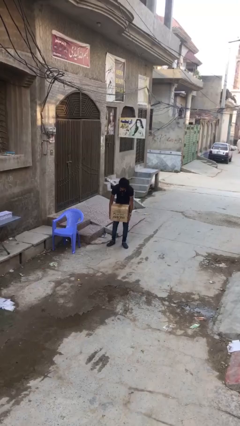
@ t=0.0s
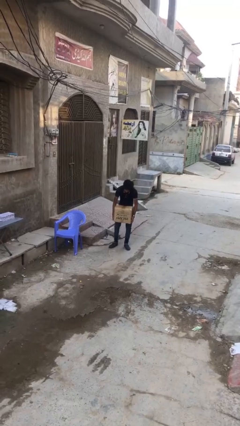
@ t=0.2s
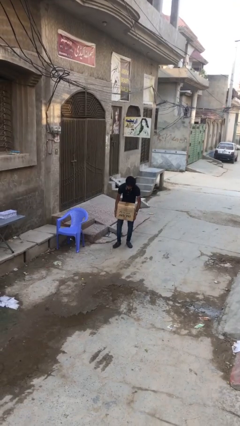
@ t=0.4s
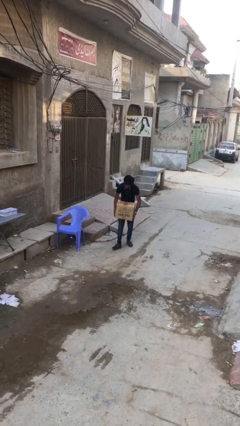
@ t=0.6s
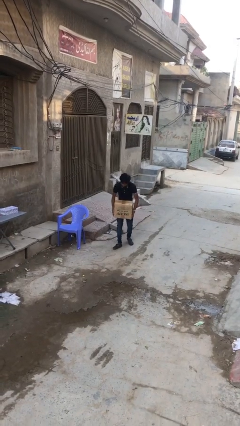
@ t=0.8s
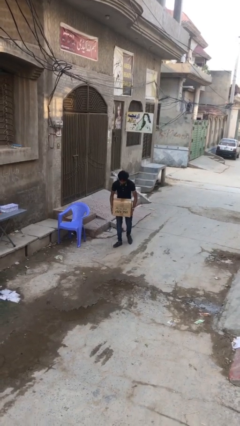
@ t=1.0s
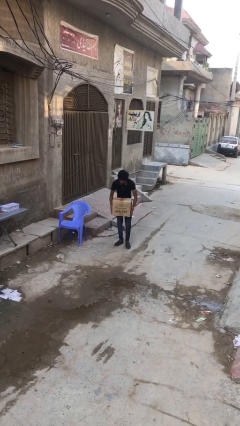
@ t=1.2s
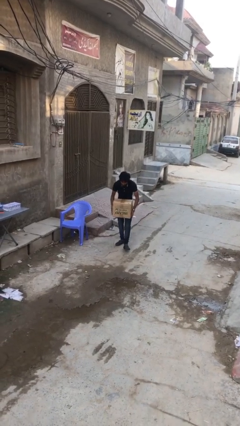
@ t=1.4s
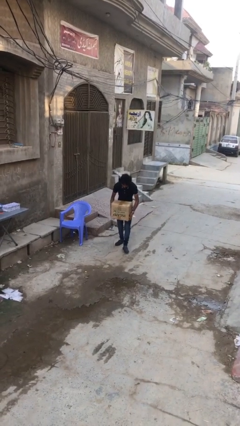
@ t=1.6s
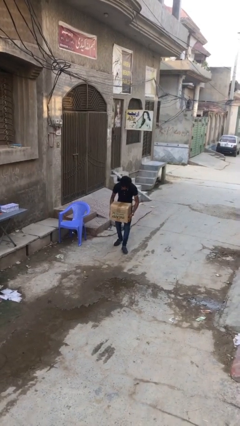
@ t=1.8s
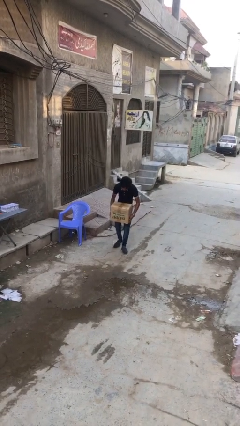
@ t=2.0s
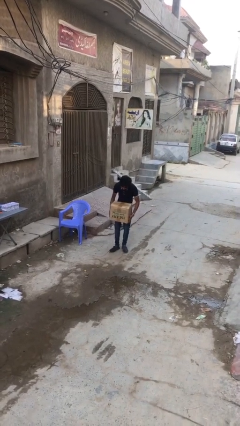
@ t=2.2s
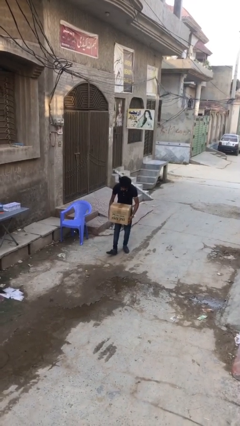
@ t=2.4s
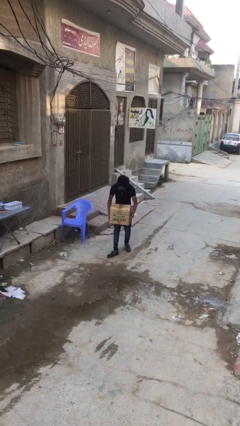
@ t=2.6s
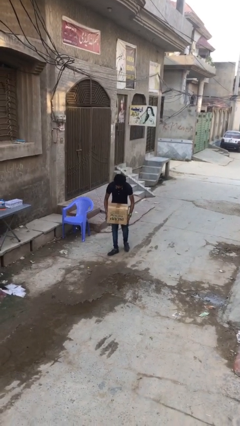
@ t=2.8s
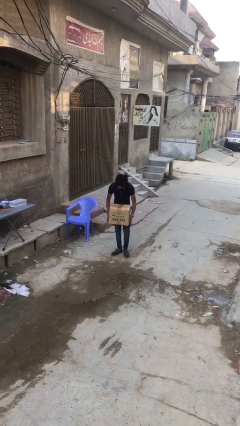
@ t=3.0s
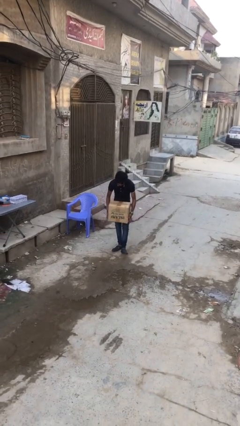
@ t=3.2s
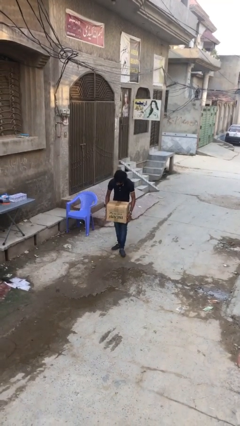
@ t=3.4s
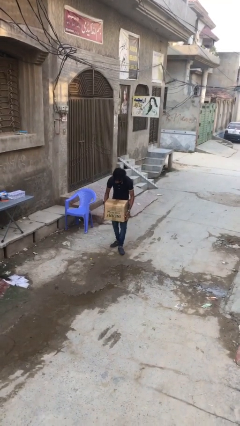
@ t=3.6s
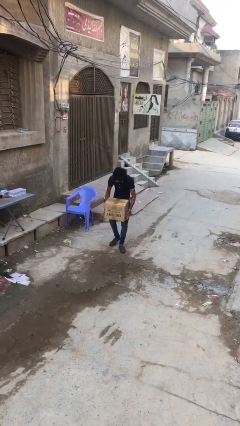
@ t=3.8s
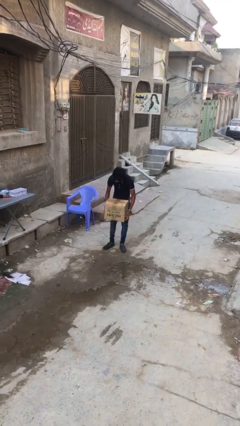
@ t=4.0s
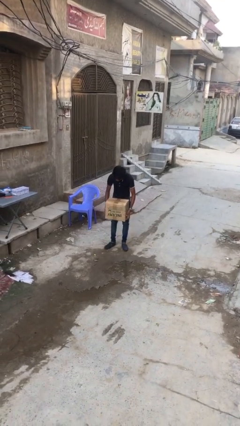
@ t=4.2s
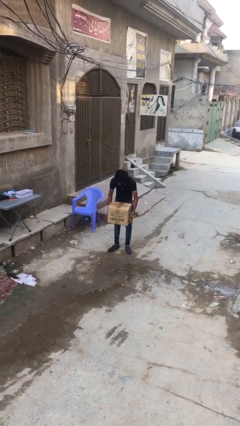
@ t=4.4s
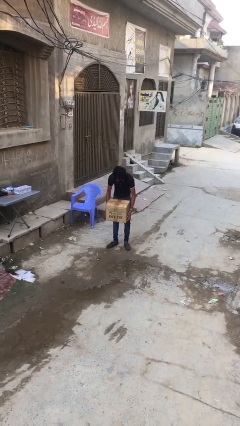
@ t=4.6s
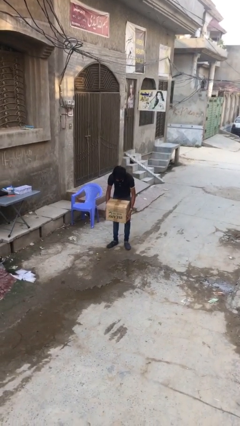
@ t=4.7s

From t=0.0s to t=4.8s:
person carries heavy object

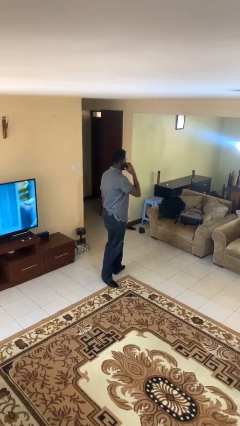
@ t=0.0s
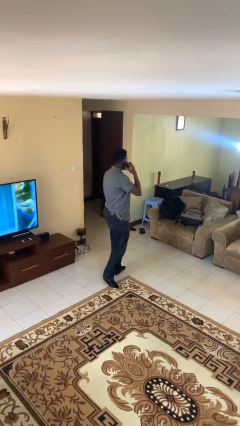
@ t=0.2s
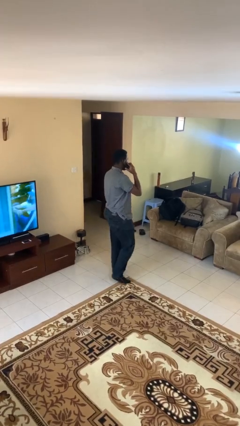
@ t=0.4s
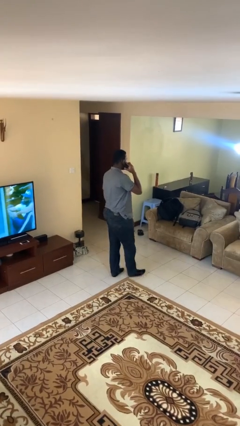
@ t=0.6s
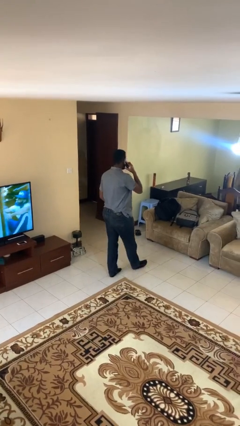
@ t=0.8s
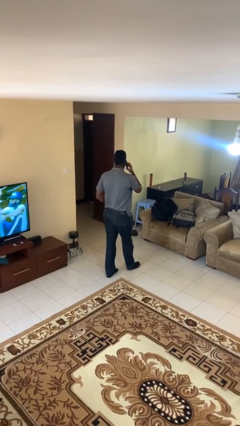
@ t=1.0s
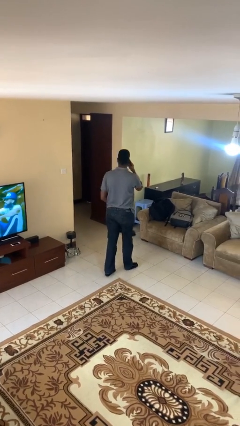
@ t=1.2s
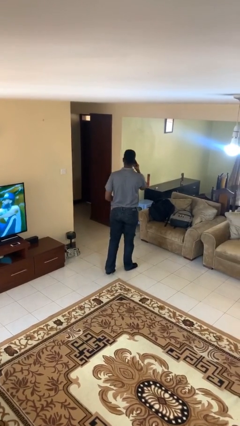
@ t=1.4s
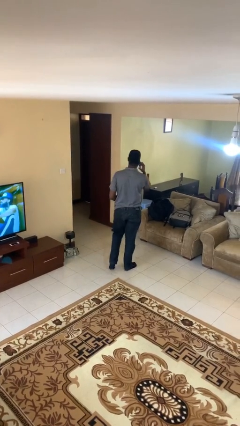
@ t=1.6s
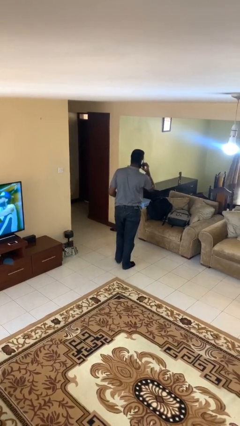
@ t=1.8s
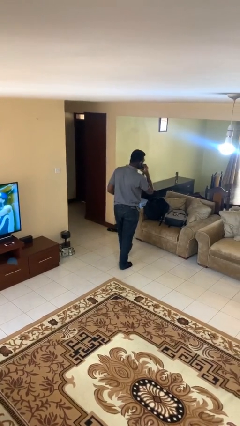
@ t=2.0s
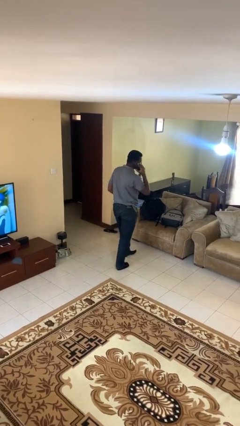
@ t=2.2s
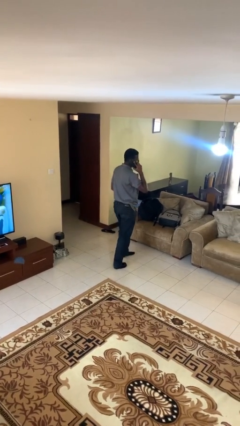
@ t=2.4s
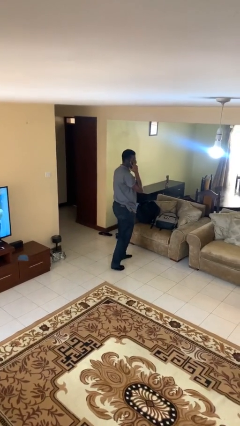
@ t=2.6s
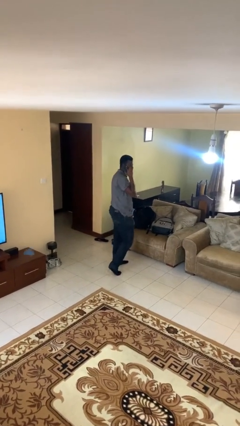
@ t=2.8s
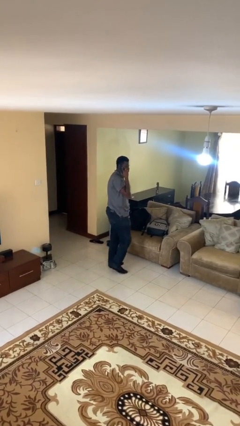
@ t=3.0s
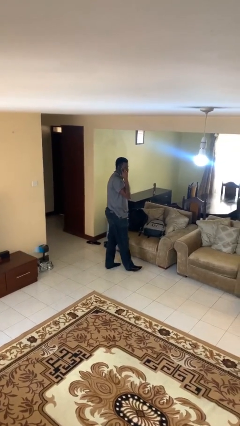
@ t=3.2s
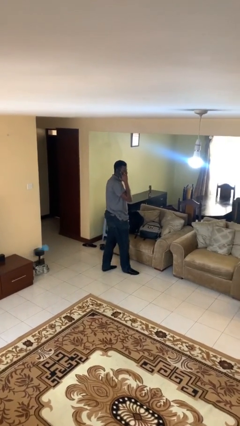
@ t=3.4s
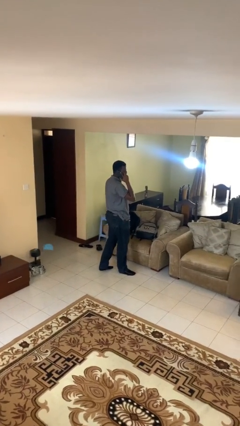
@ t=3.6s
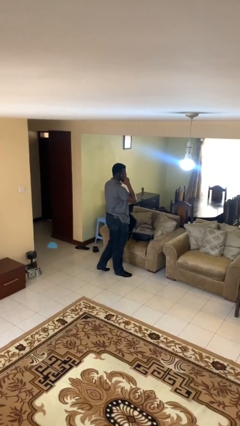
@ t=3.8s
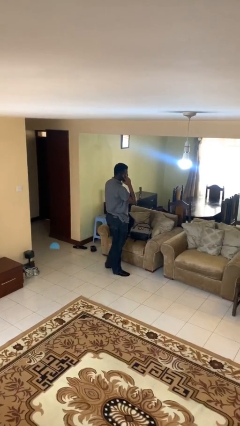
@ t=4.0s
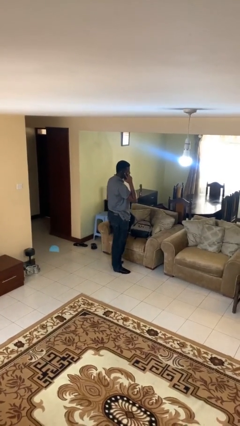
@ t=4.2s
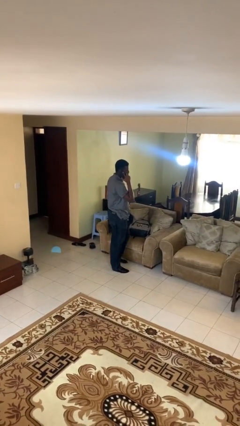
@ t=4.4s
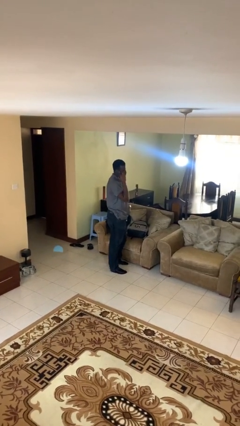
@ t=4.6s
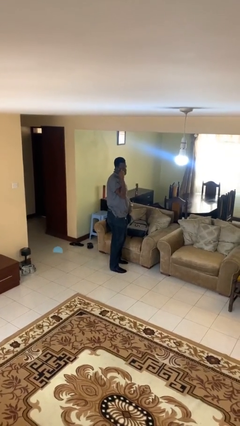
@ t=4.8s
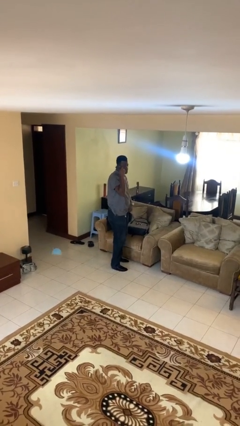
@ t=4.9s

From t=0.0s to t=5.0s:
person talks on phone

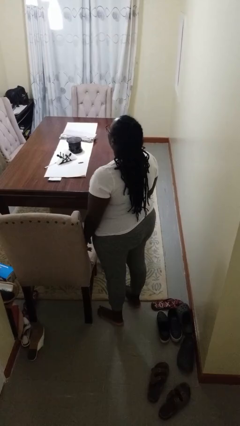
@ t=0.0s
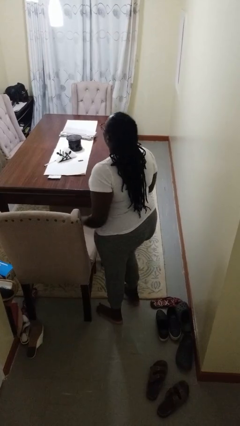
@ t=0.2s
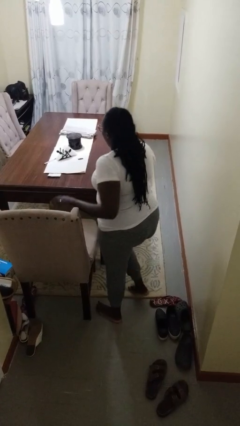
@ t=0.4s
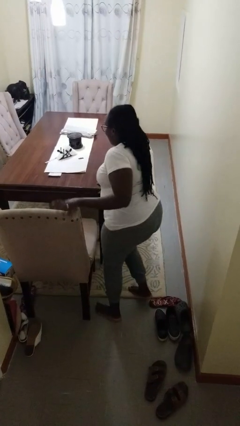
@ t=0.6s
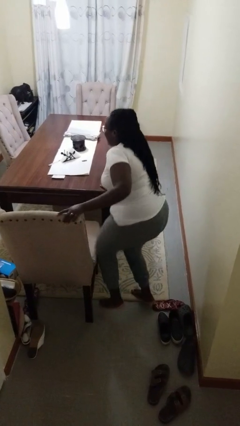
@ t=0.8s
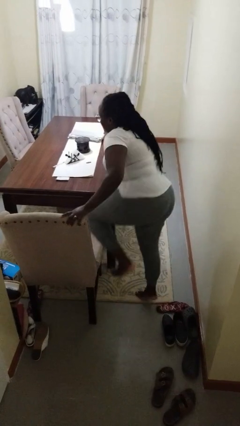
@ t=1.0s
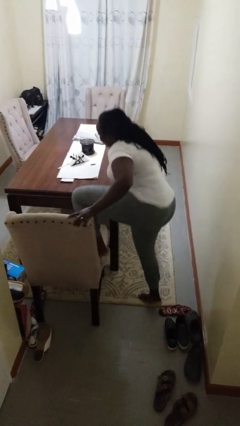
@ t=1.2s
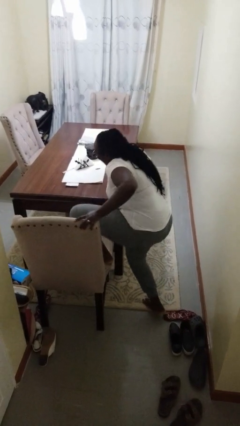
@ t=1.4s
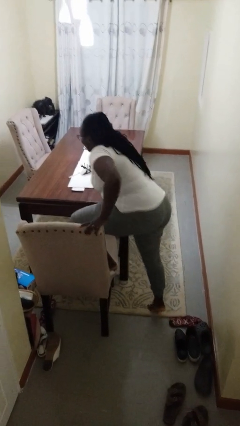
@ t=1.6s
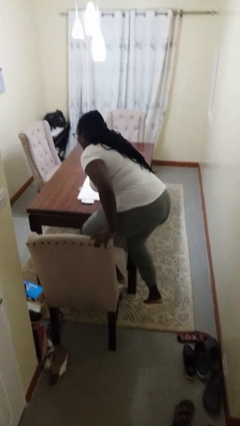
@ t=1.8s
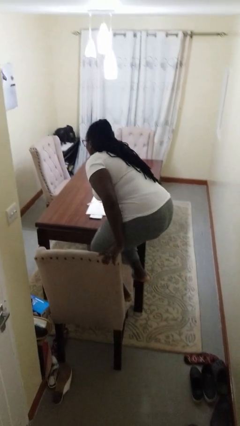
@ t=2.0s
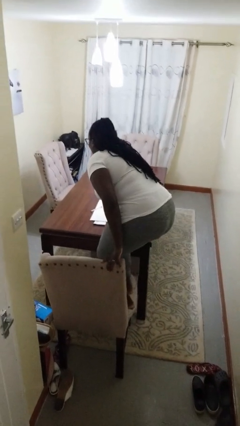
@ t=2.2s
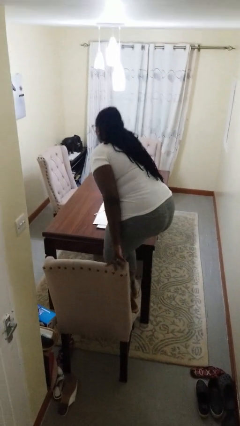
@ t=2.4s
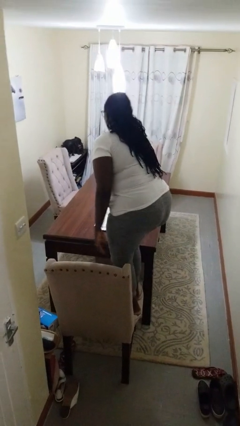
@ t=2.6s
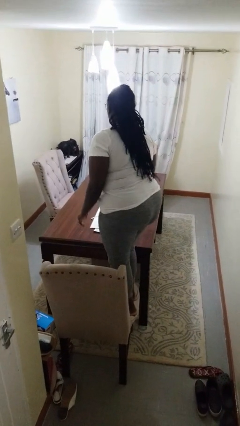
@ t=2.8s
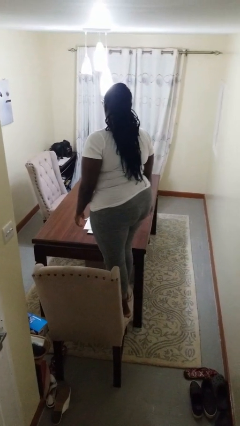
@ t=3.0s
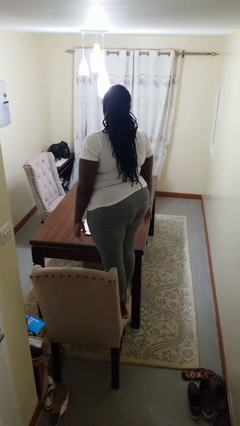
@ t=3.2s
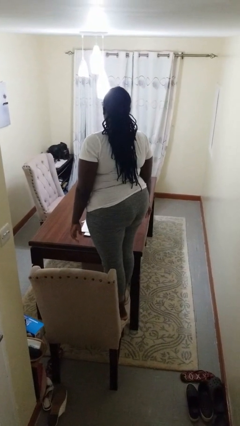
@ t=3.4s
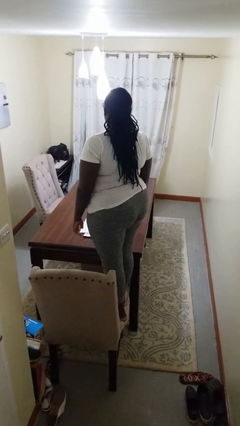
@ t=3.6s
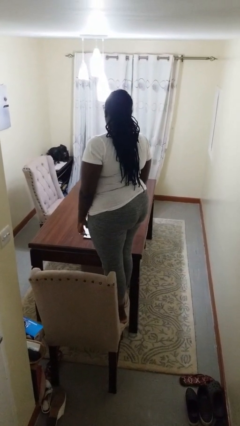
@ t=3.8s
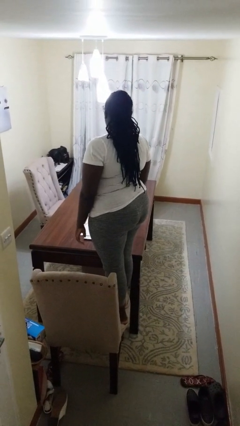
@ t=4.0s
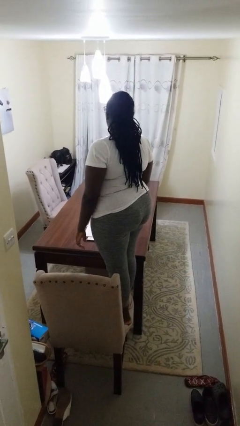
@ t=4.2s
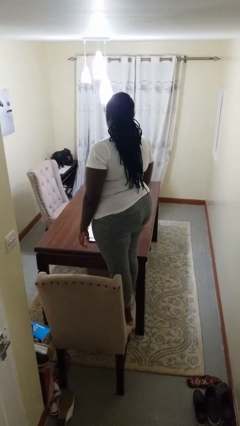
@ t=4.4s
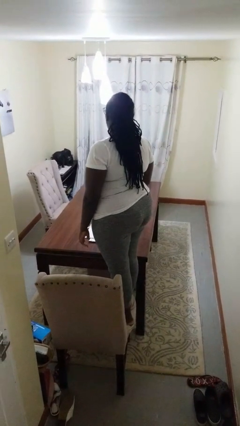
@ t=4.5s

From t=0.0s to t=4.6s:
person climbs on chair

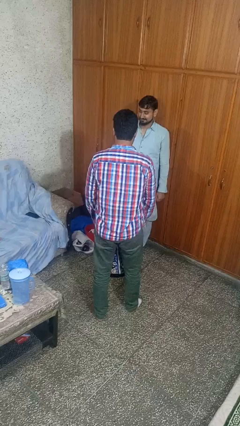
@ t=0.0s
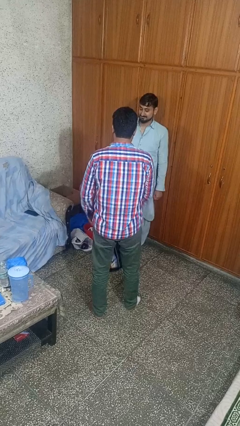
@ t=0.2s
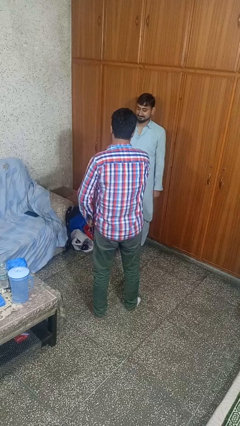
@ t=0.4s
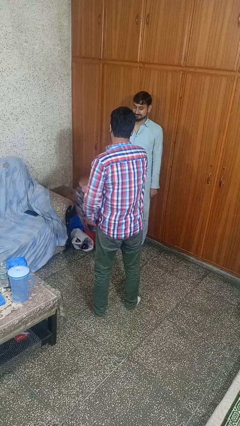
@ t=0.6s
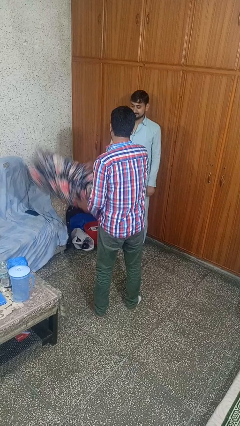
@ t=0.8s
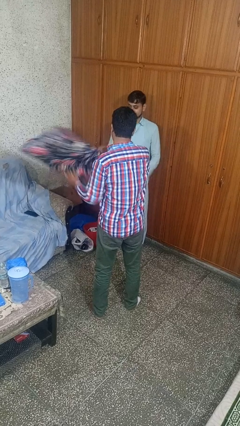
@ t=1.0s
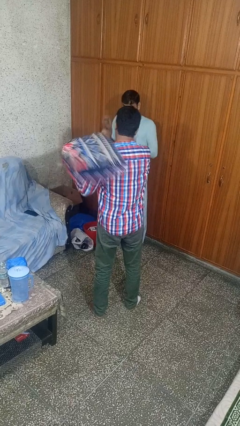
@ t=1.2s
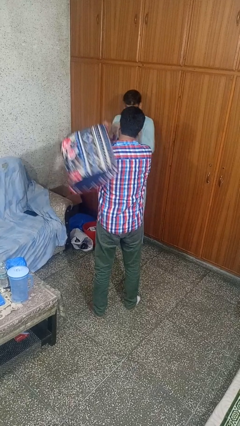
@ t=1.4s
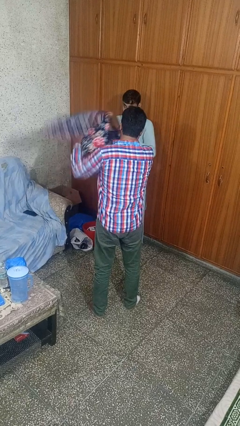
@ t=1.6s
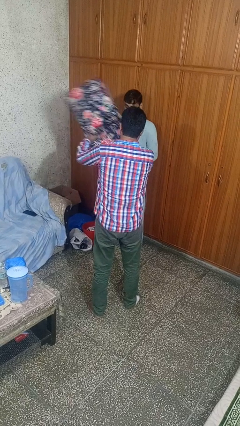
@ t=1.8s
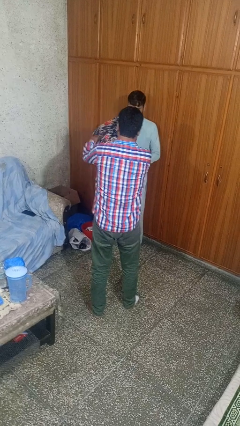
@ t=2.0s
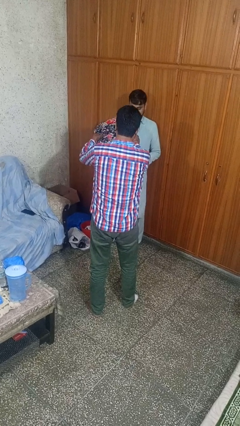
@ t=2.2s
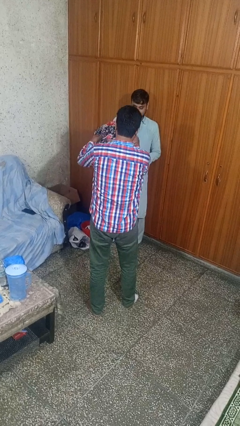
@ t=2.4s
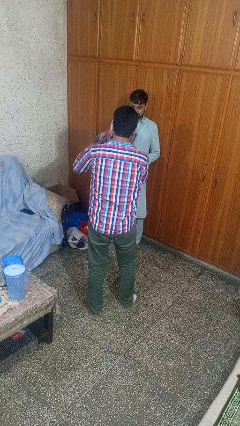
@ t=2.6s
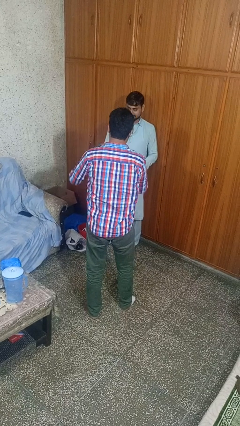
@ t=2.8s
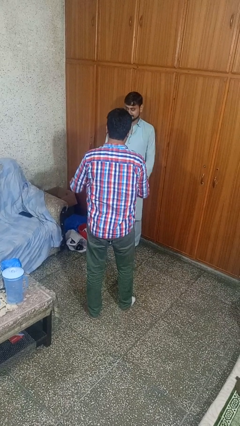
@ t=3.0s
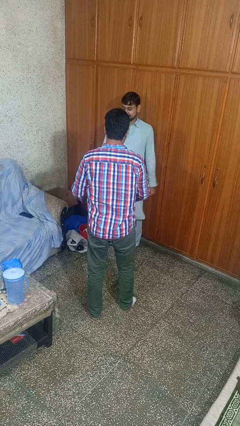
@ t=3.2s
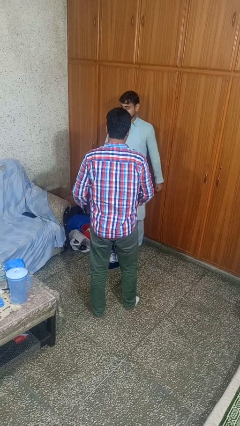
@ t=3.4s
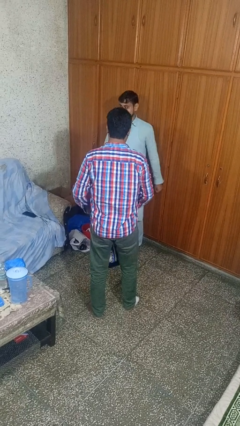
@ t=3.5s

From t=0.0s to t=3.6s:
person hits person with pillow
